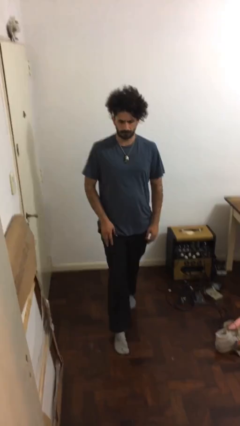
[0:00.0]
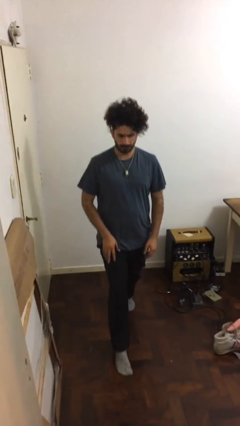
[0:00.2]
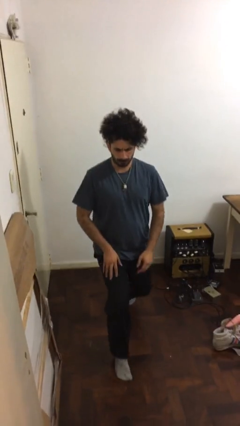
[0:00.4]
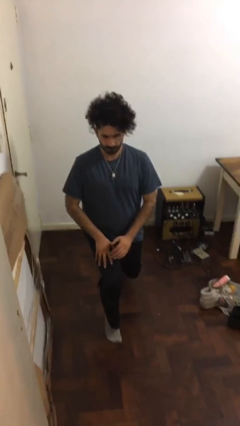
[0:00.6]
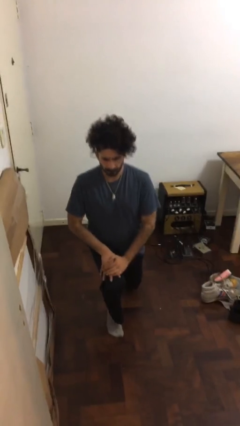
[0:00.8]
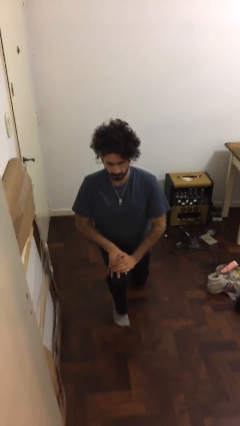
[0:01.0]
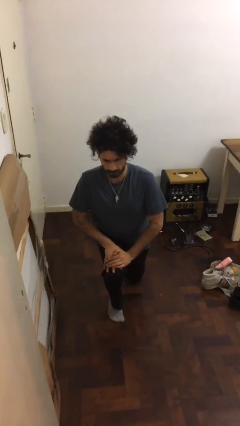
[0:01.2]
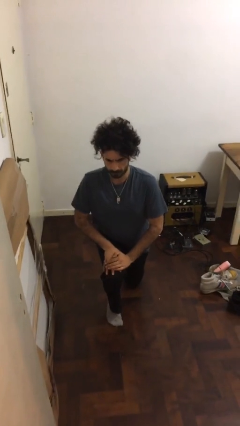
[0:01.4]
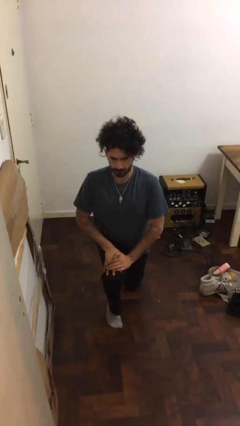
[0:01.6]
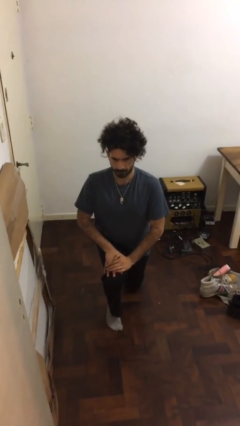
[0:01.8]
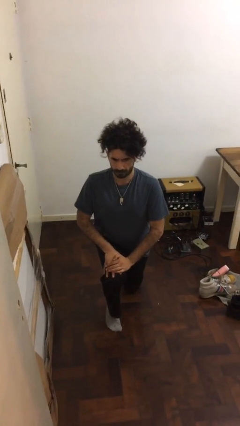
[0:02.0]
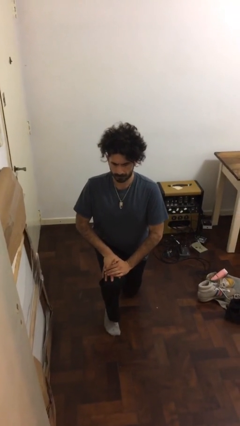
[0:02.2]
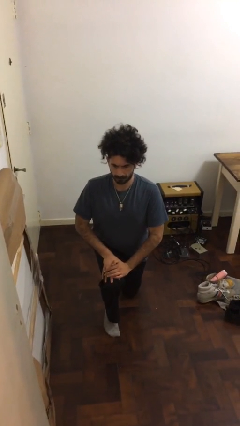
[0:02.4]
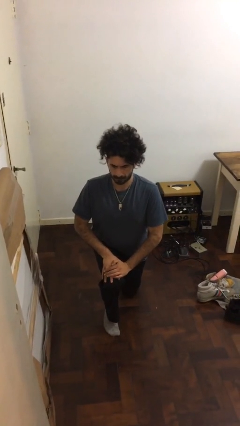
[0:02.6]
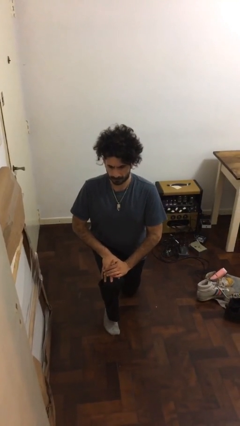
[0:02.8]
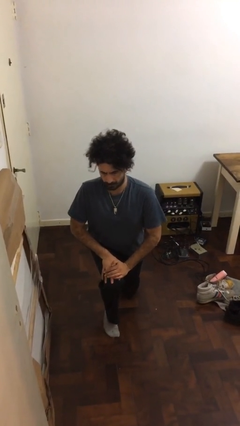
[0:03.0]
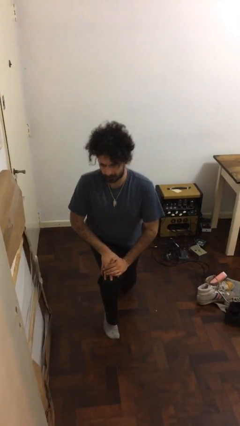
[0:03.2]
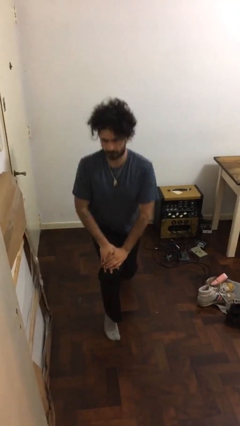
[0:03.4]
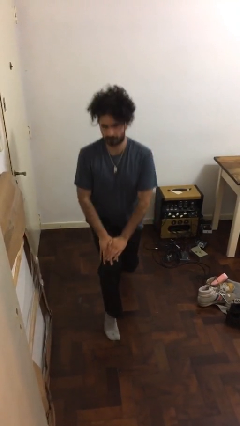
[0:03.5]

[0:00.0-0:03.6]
person kneels

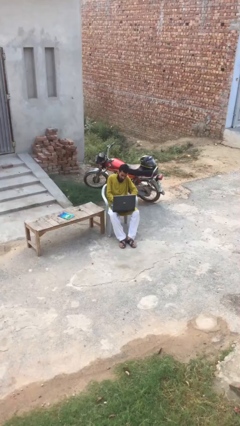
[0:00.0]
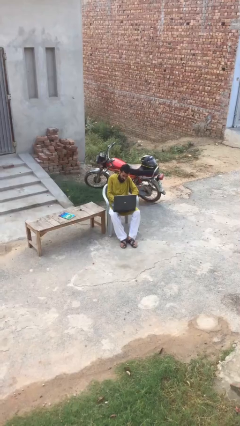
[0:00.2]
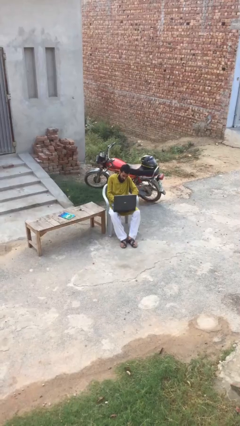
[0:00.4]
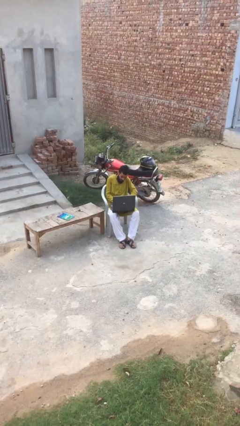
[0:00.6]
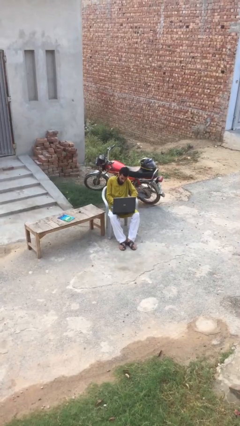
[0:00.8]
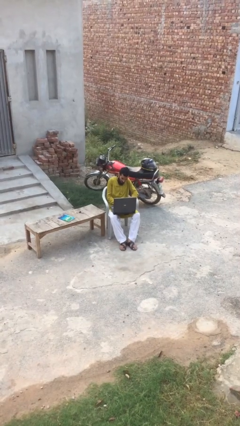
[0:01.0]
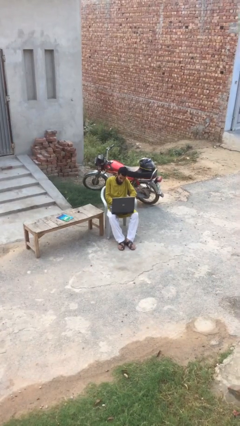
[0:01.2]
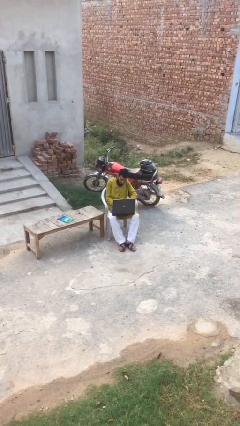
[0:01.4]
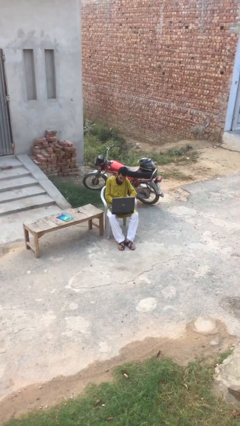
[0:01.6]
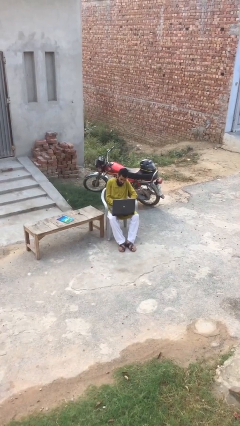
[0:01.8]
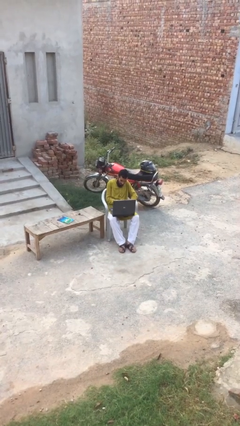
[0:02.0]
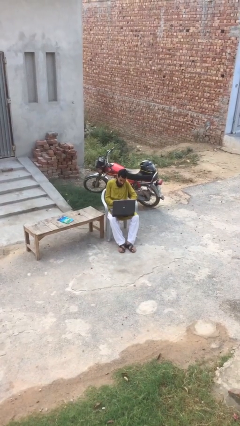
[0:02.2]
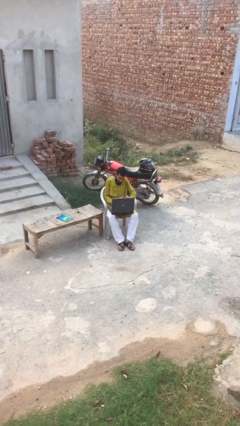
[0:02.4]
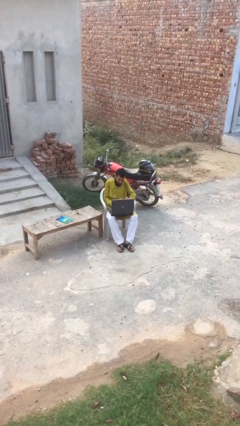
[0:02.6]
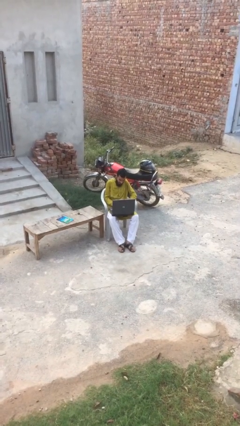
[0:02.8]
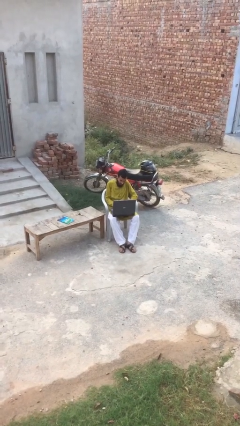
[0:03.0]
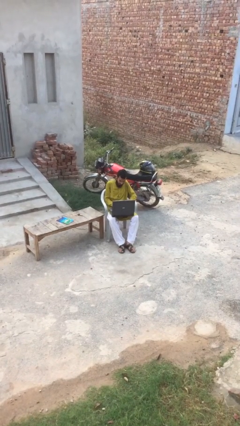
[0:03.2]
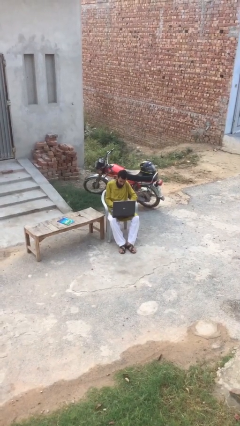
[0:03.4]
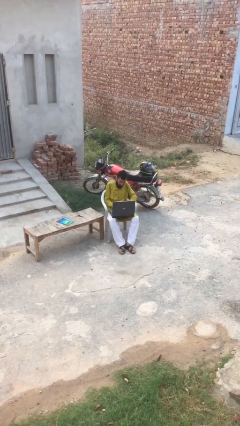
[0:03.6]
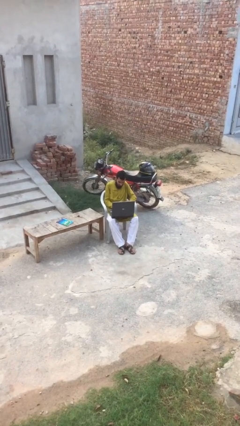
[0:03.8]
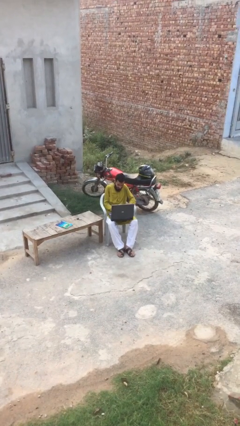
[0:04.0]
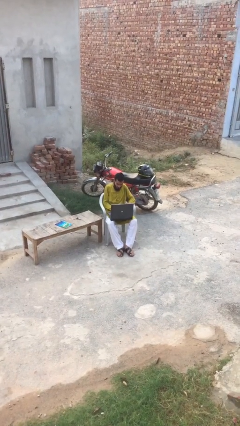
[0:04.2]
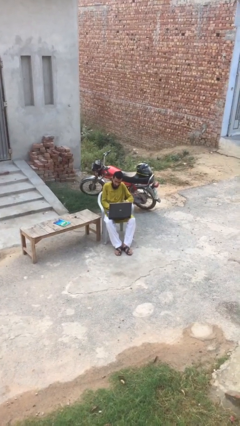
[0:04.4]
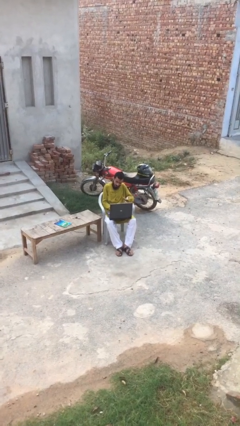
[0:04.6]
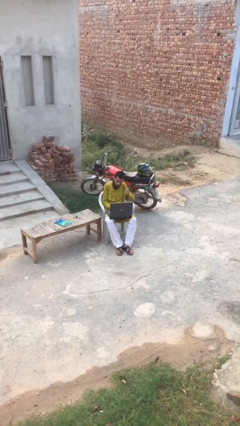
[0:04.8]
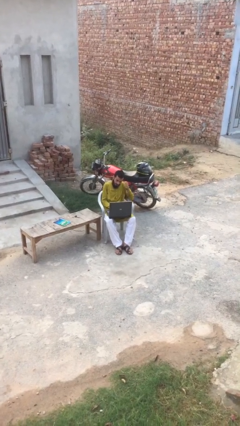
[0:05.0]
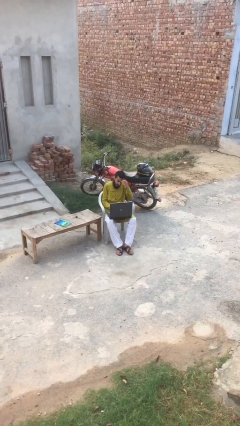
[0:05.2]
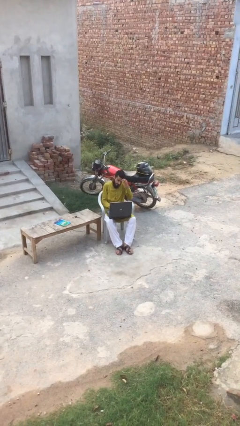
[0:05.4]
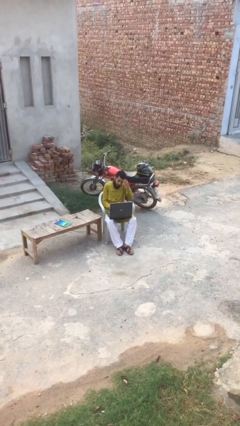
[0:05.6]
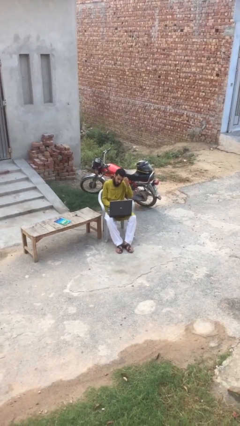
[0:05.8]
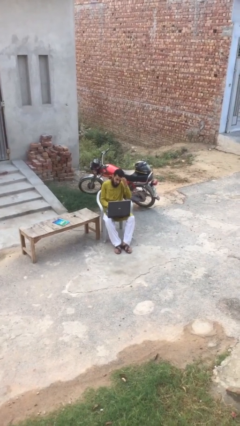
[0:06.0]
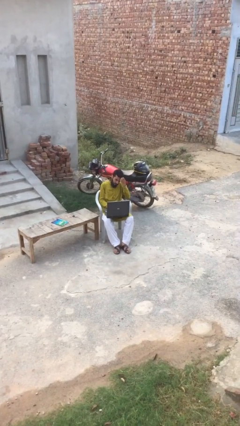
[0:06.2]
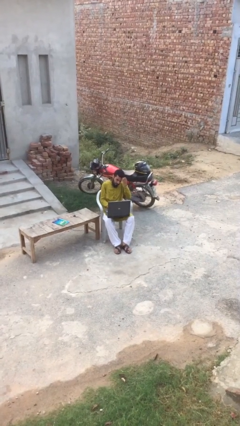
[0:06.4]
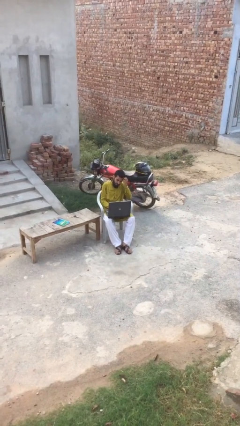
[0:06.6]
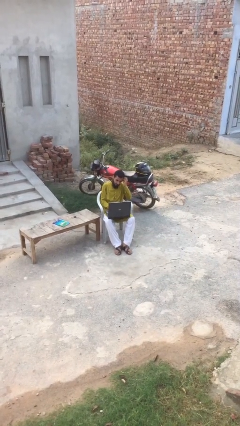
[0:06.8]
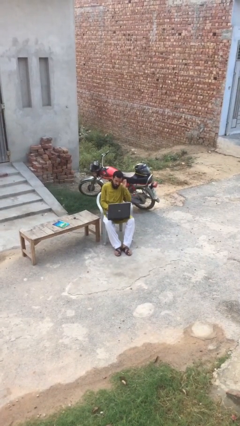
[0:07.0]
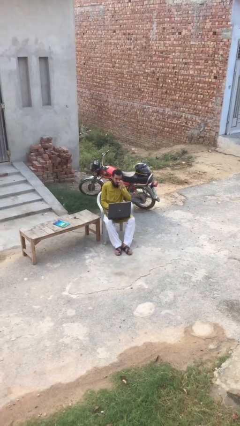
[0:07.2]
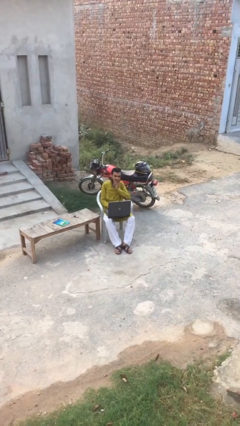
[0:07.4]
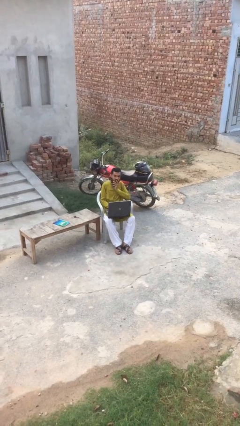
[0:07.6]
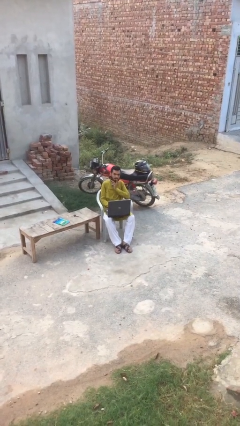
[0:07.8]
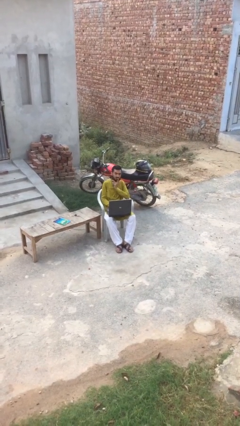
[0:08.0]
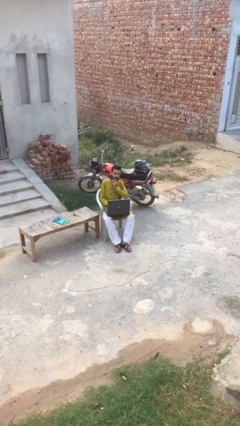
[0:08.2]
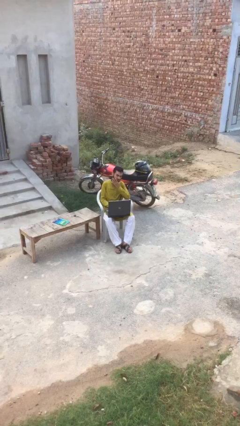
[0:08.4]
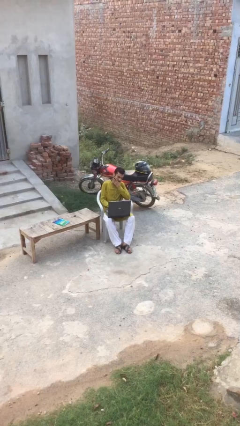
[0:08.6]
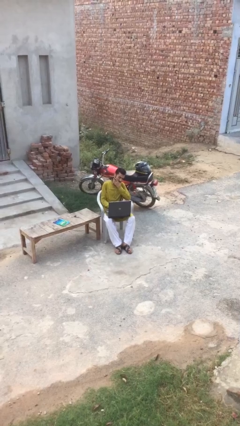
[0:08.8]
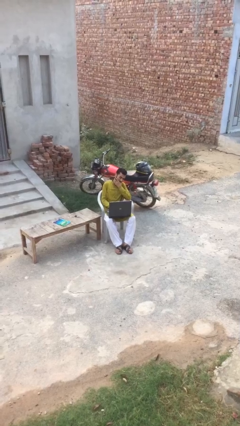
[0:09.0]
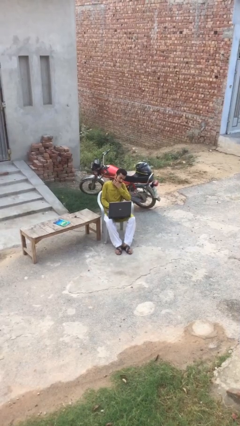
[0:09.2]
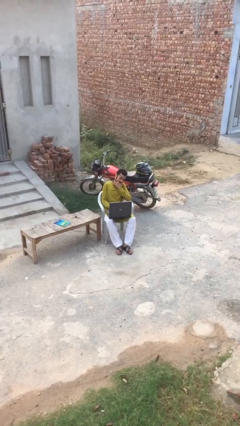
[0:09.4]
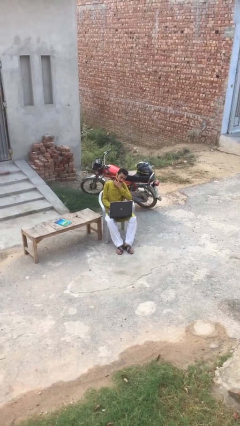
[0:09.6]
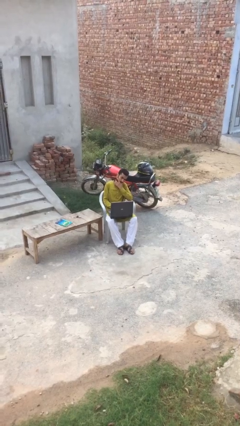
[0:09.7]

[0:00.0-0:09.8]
person interacts with laptop

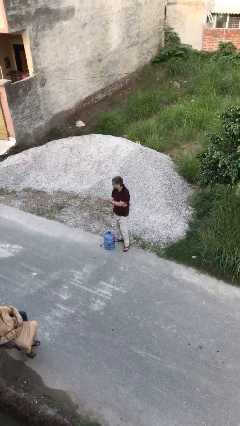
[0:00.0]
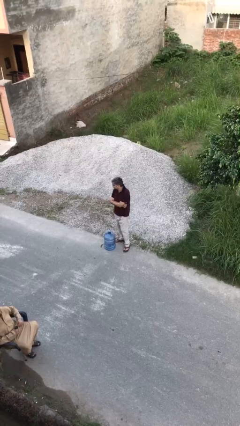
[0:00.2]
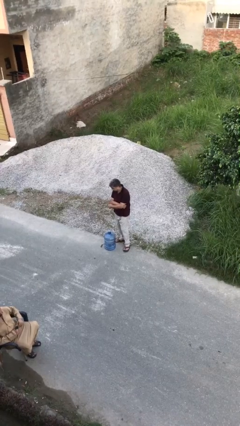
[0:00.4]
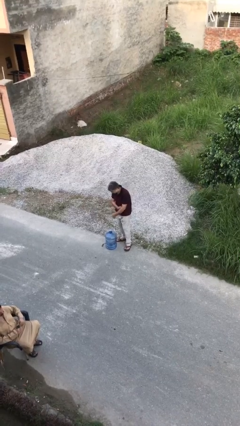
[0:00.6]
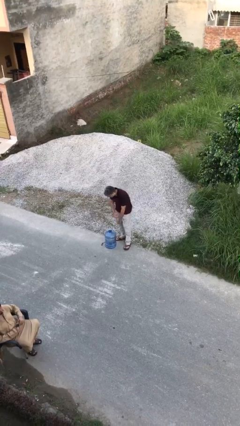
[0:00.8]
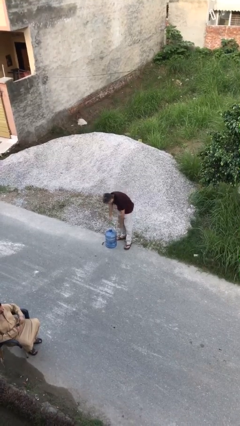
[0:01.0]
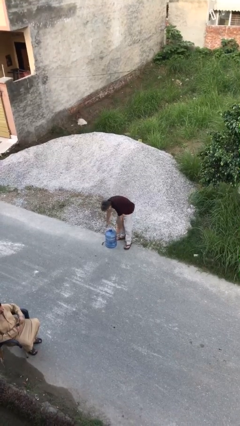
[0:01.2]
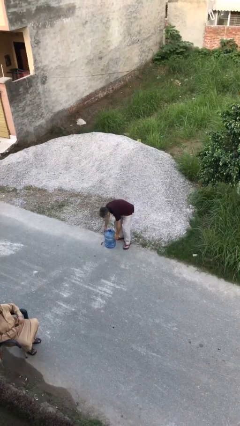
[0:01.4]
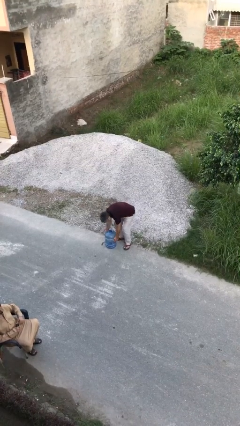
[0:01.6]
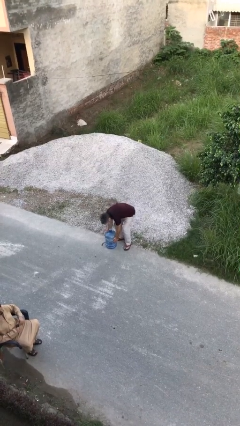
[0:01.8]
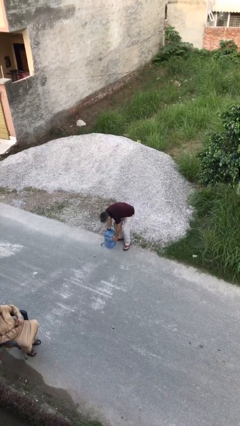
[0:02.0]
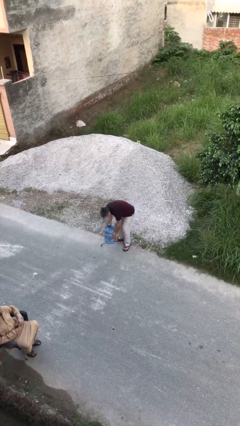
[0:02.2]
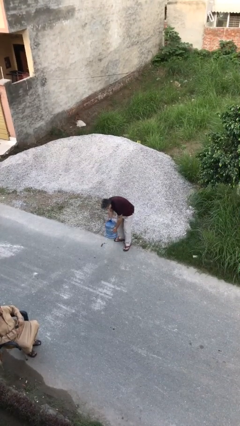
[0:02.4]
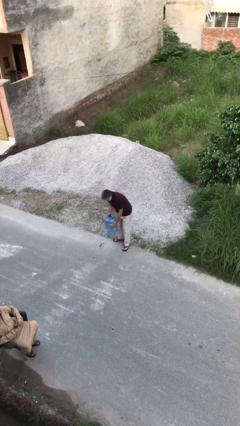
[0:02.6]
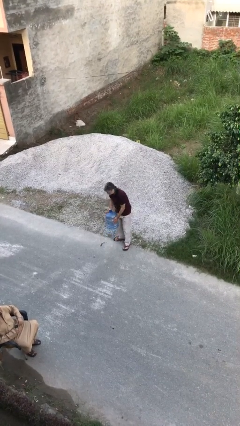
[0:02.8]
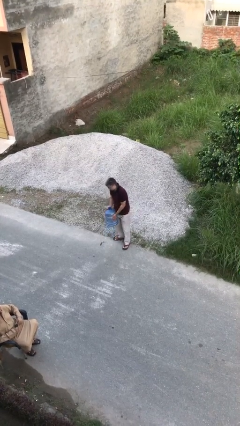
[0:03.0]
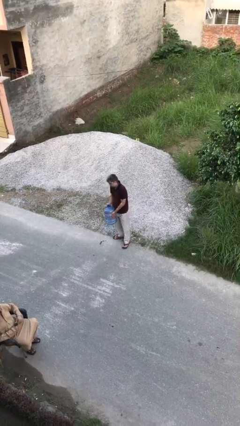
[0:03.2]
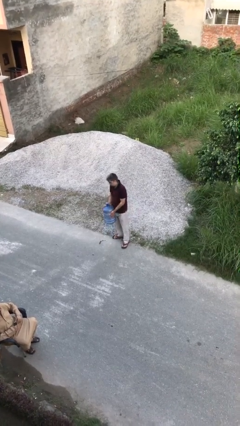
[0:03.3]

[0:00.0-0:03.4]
person picks up object from floor

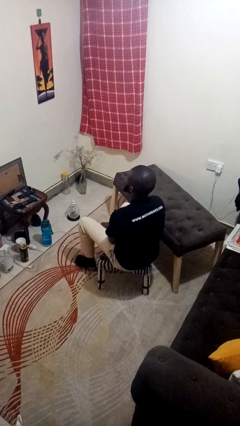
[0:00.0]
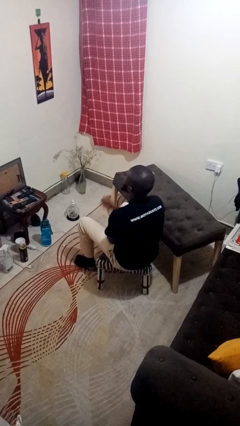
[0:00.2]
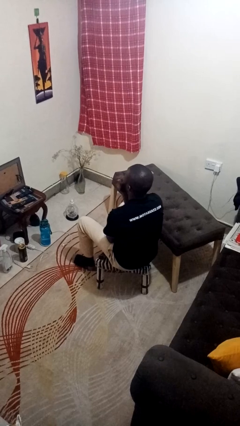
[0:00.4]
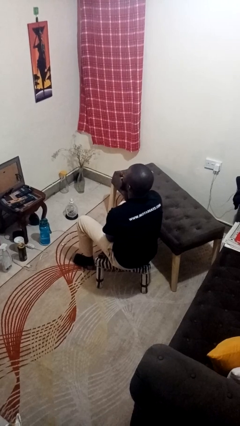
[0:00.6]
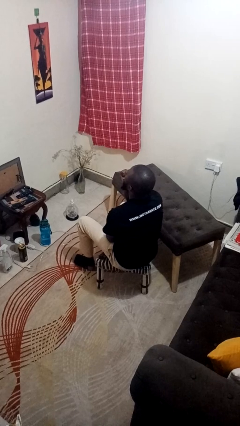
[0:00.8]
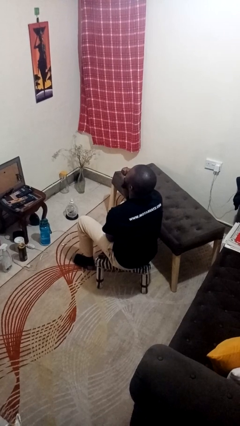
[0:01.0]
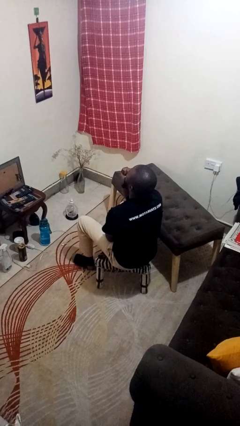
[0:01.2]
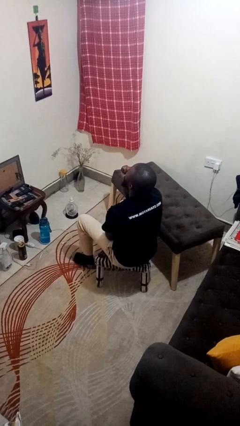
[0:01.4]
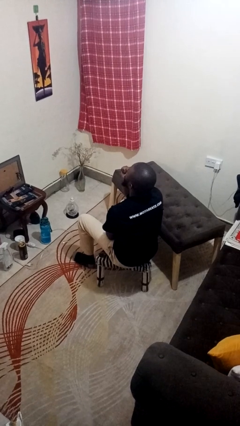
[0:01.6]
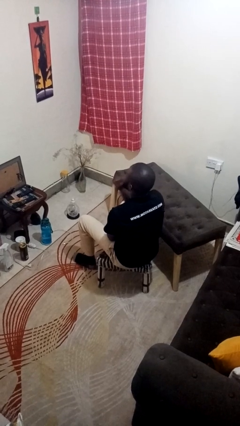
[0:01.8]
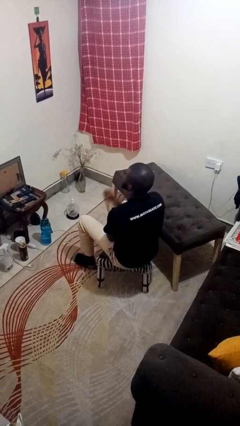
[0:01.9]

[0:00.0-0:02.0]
person yawns
